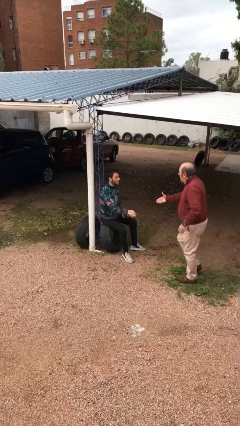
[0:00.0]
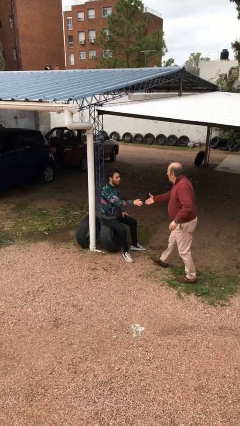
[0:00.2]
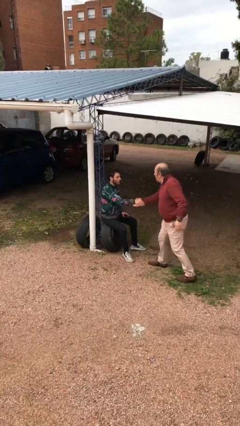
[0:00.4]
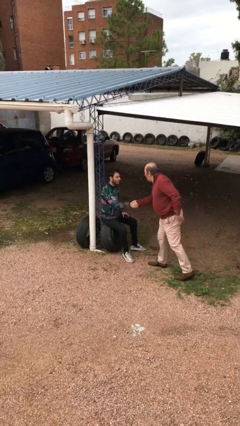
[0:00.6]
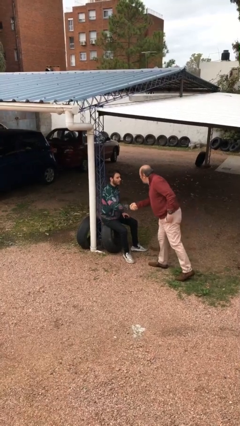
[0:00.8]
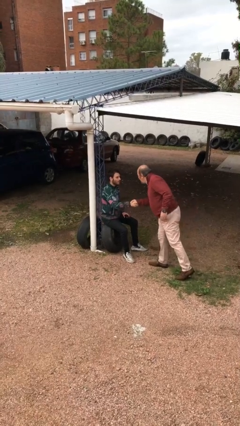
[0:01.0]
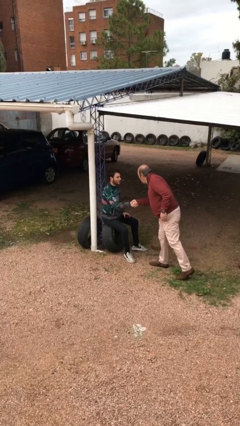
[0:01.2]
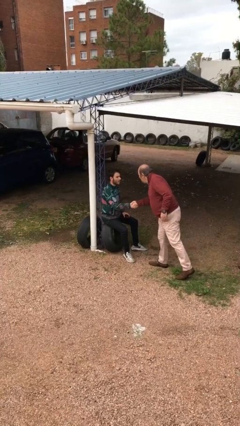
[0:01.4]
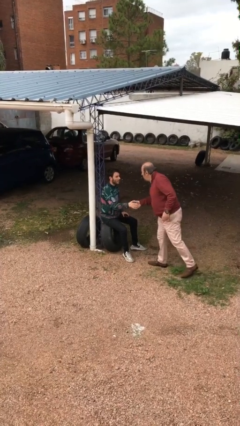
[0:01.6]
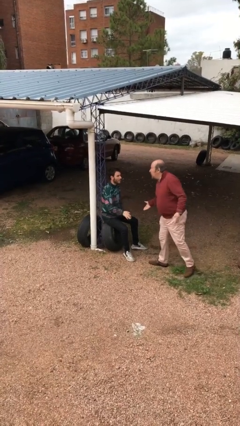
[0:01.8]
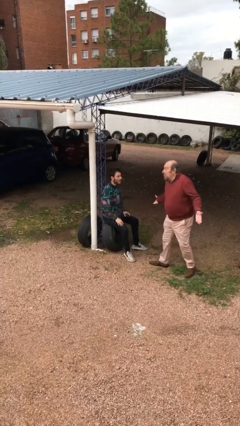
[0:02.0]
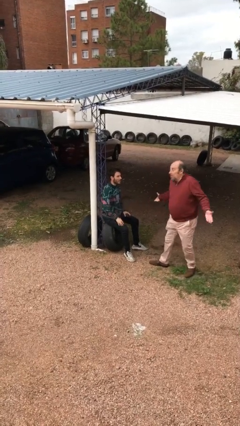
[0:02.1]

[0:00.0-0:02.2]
person shakes hand

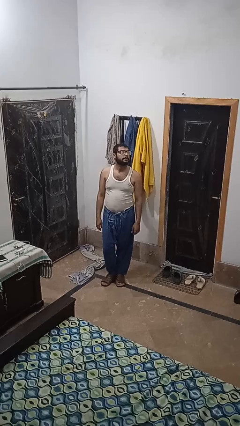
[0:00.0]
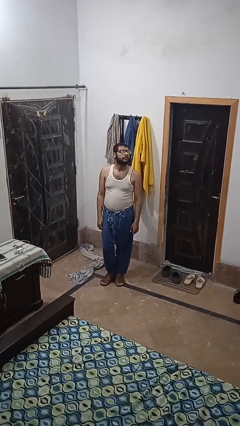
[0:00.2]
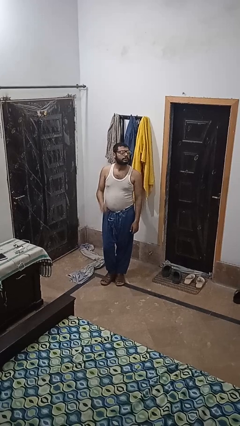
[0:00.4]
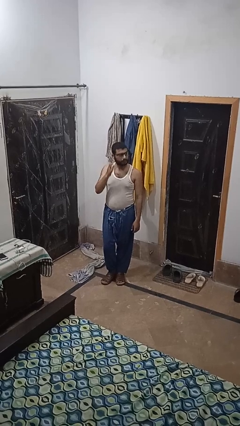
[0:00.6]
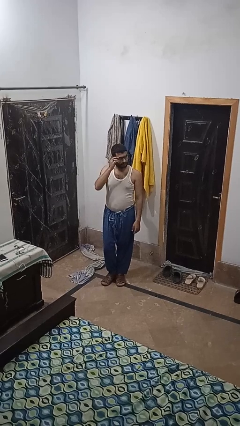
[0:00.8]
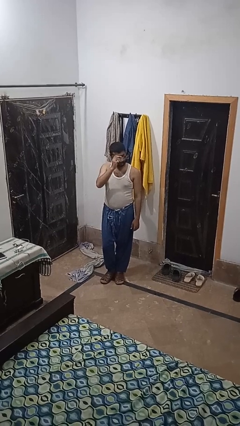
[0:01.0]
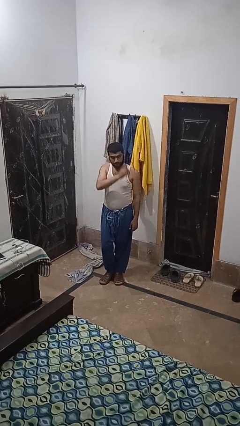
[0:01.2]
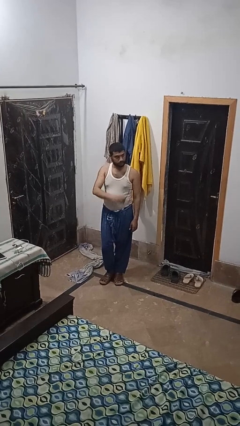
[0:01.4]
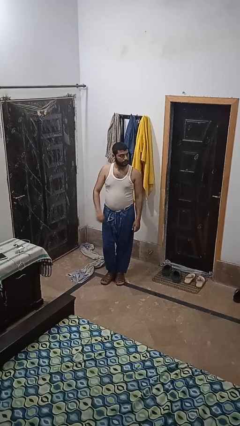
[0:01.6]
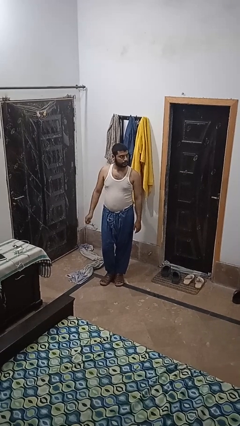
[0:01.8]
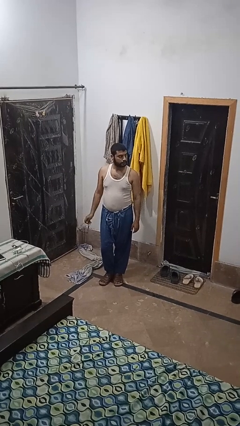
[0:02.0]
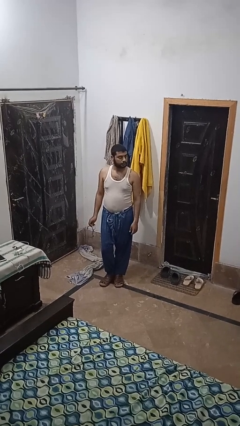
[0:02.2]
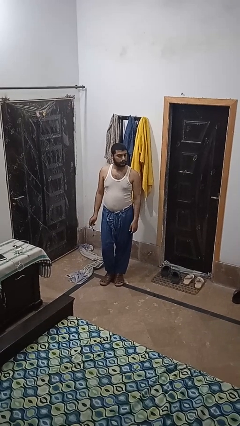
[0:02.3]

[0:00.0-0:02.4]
person takes off glasses

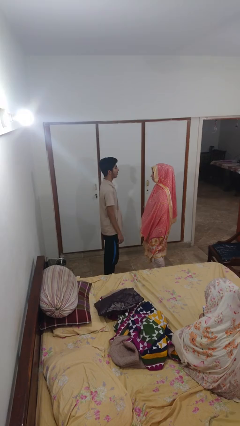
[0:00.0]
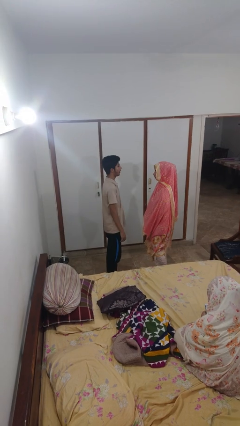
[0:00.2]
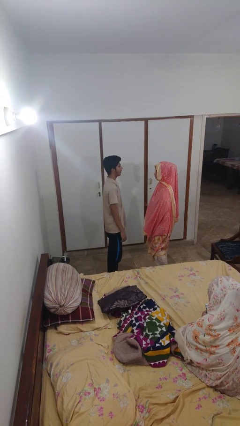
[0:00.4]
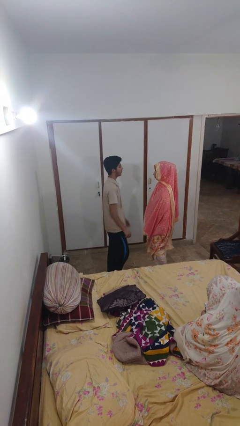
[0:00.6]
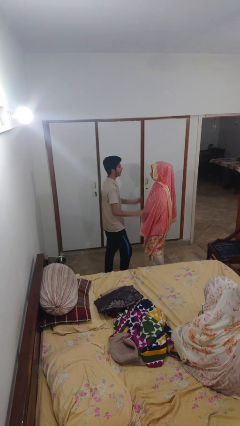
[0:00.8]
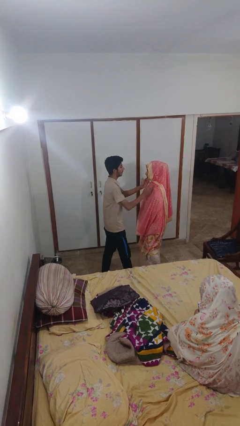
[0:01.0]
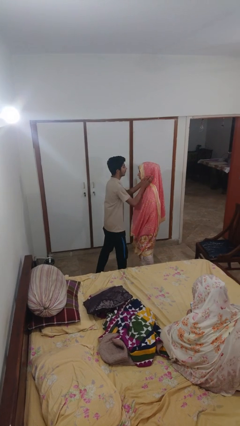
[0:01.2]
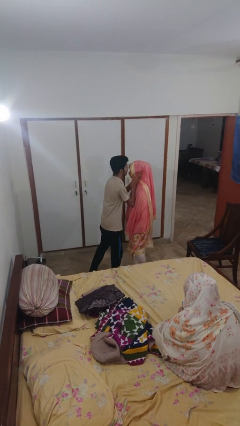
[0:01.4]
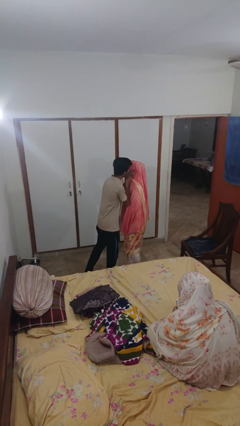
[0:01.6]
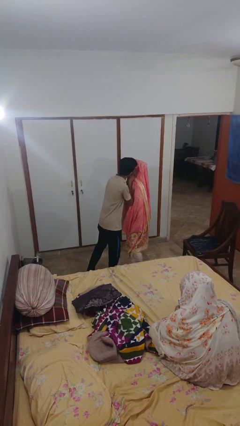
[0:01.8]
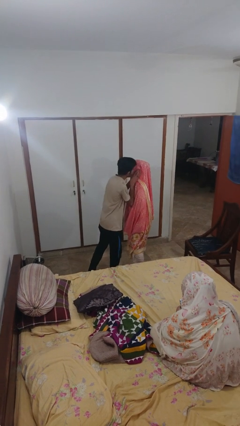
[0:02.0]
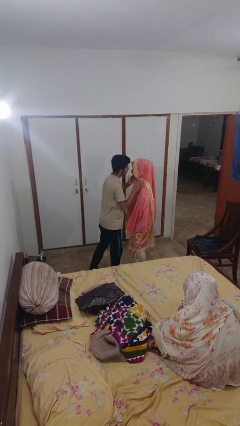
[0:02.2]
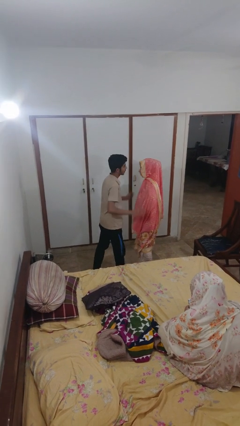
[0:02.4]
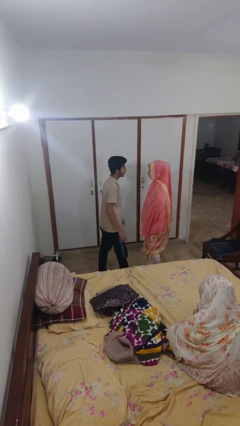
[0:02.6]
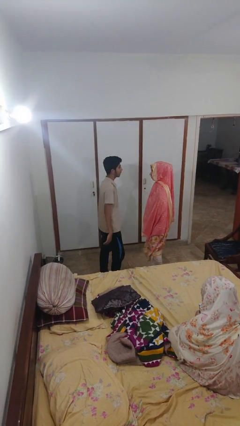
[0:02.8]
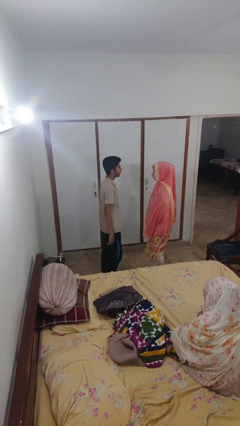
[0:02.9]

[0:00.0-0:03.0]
person kisses cheek of person

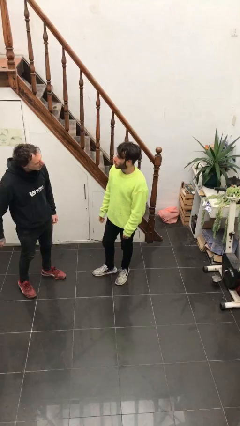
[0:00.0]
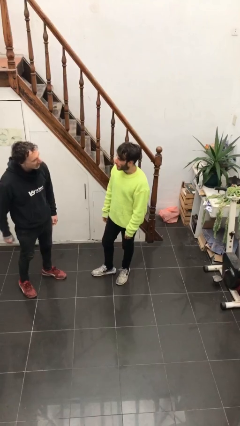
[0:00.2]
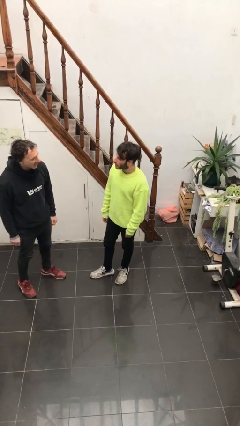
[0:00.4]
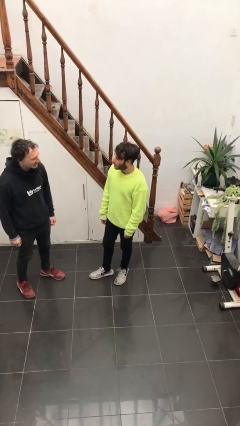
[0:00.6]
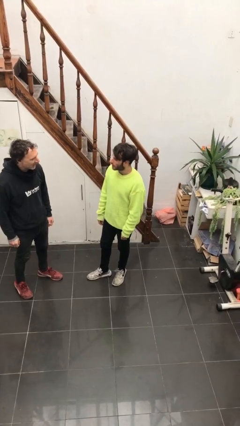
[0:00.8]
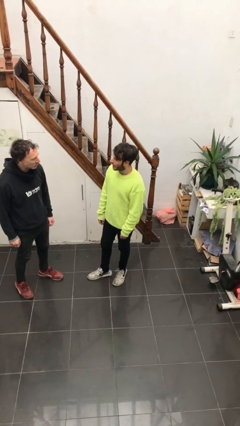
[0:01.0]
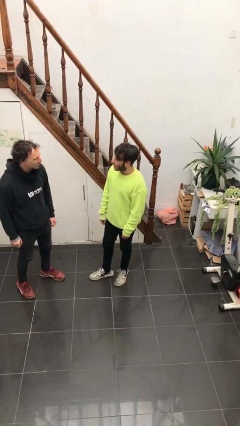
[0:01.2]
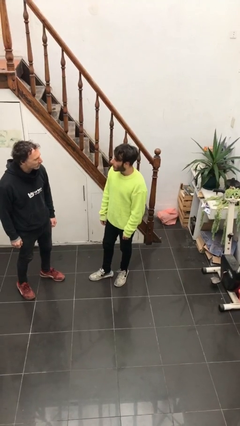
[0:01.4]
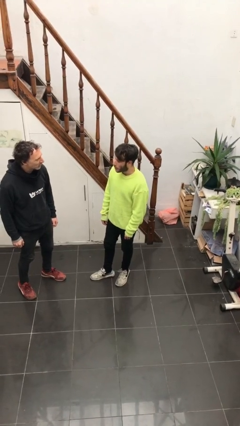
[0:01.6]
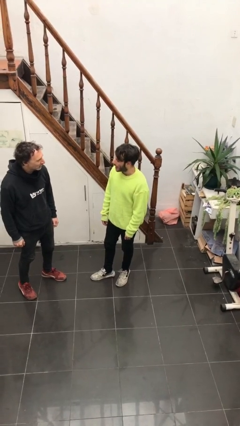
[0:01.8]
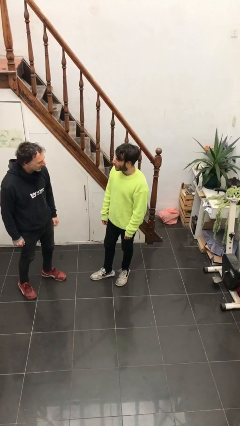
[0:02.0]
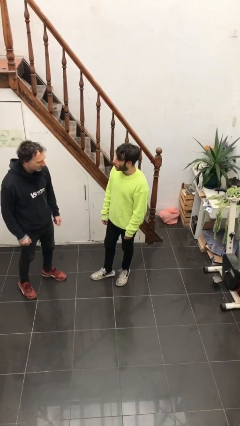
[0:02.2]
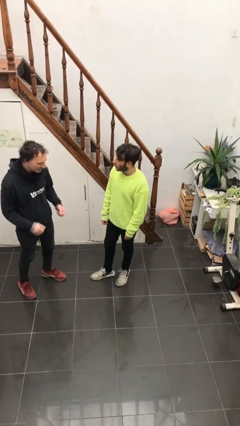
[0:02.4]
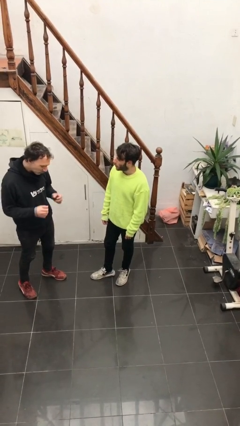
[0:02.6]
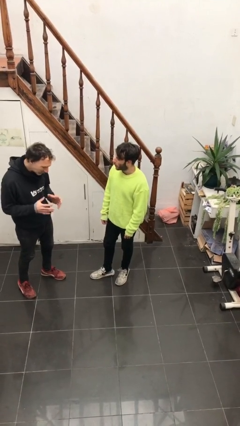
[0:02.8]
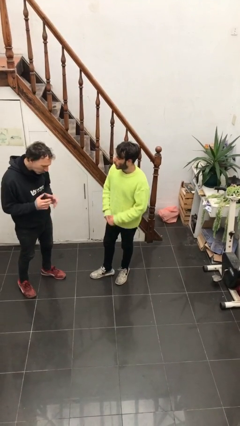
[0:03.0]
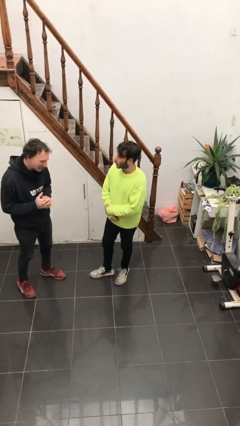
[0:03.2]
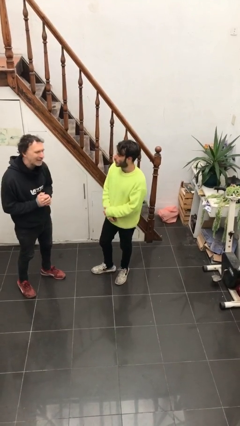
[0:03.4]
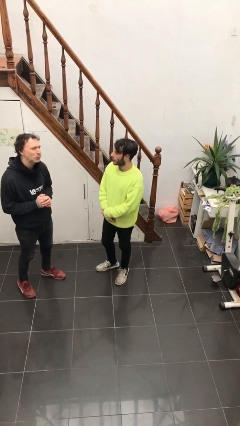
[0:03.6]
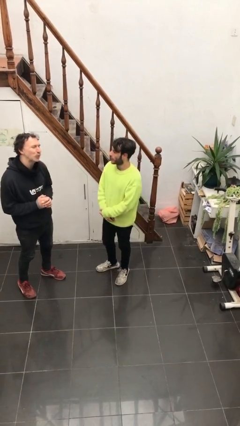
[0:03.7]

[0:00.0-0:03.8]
person talks to person

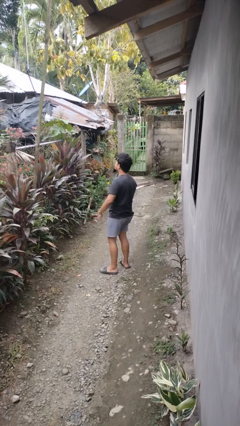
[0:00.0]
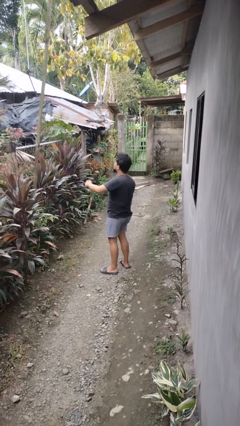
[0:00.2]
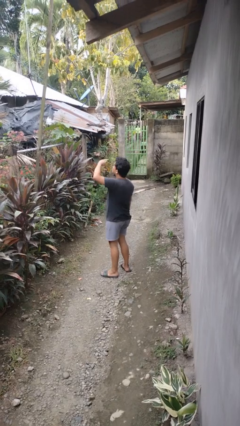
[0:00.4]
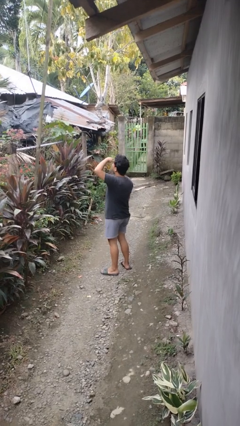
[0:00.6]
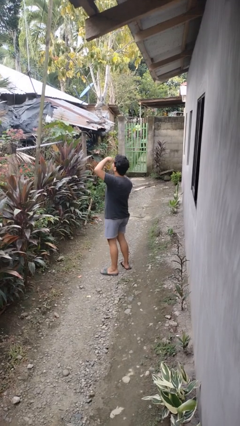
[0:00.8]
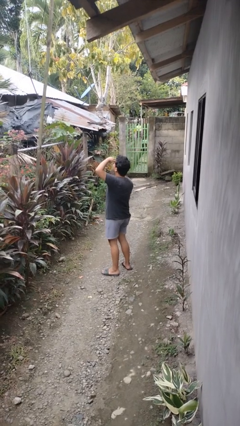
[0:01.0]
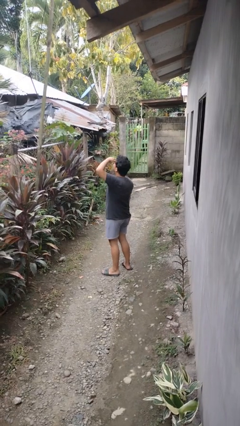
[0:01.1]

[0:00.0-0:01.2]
person shades eyes

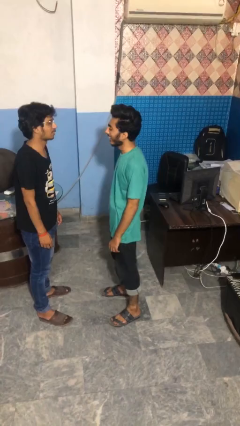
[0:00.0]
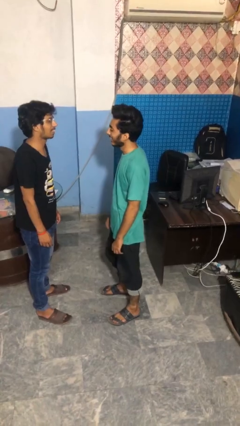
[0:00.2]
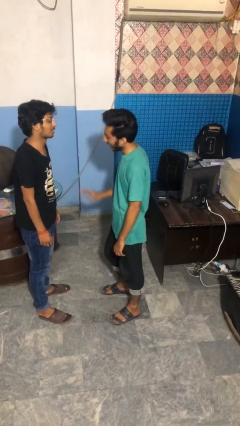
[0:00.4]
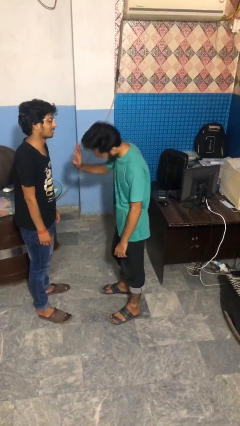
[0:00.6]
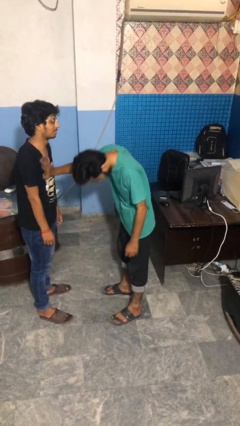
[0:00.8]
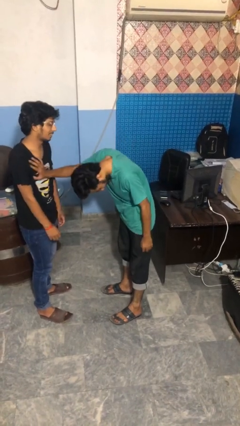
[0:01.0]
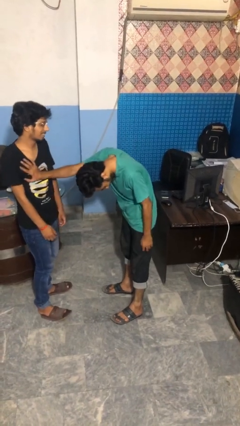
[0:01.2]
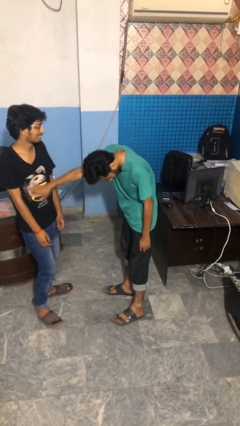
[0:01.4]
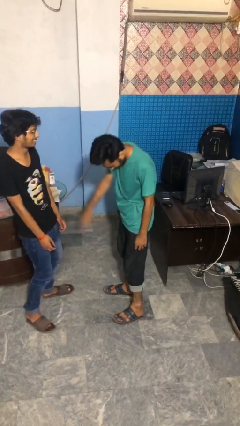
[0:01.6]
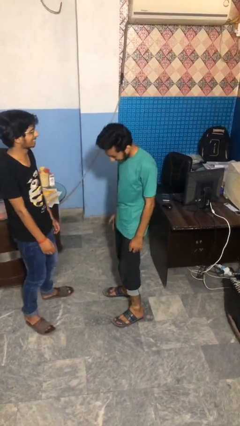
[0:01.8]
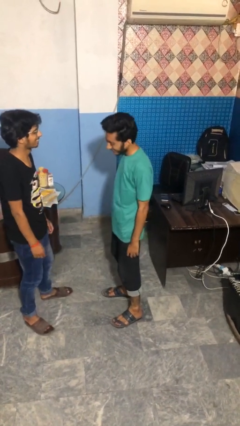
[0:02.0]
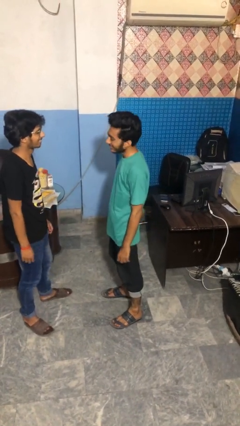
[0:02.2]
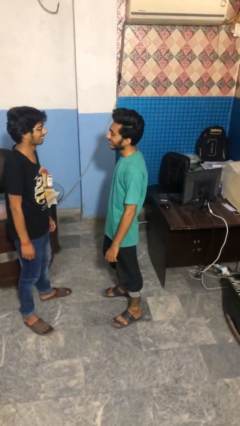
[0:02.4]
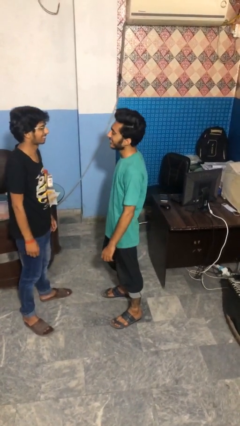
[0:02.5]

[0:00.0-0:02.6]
person shoves person

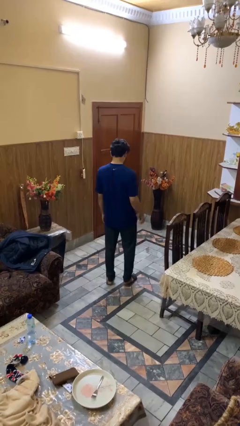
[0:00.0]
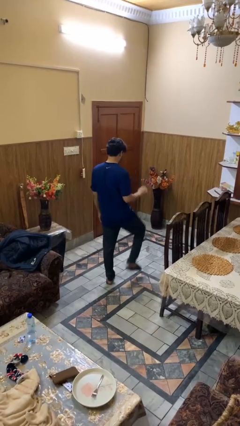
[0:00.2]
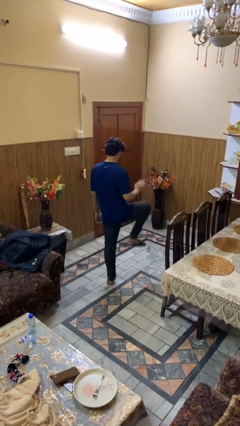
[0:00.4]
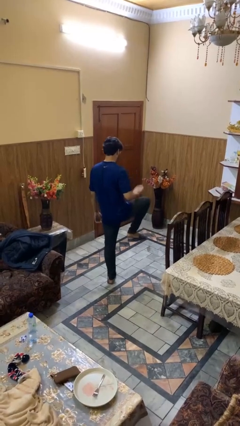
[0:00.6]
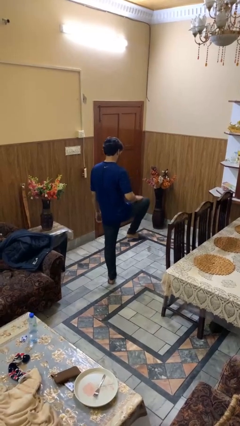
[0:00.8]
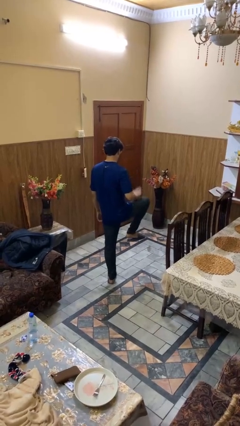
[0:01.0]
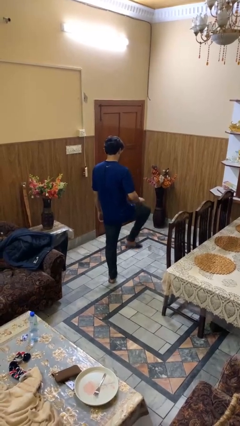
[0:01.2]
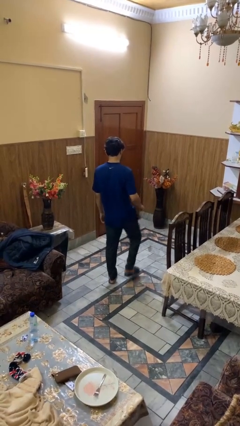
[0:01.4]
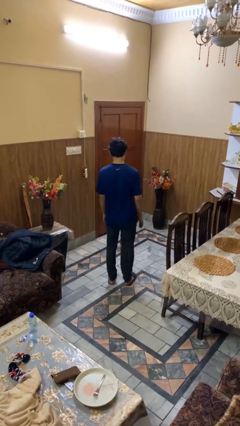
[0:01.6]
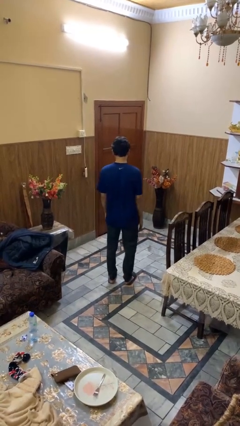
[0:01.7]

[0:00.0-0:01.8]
person slaps hands on thighs

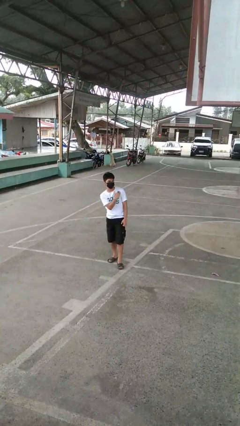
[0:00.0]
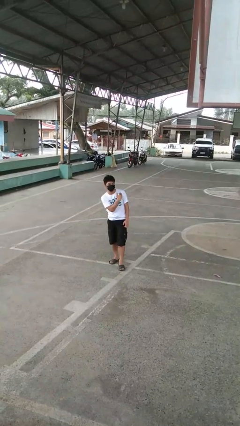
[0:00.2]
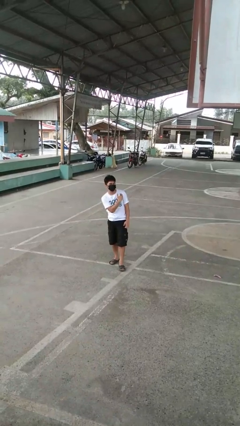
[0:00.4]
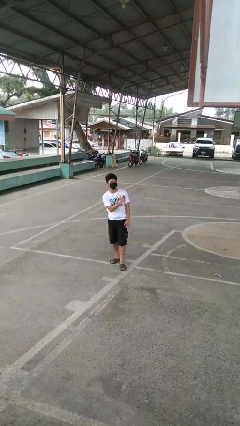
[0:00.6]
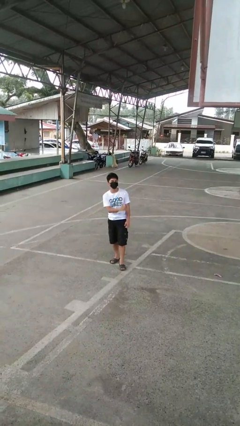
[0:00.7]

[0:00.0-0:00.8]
person gestures cut
